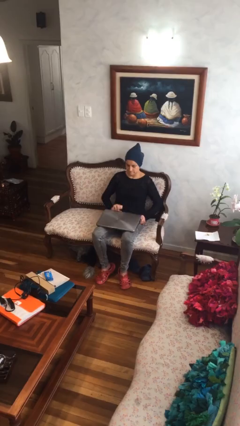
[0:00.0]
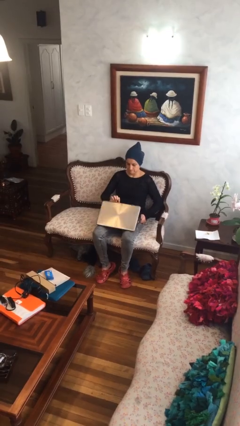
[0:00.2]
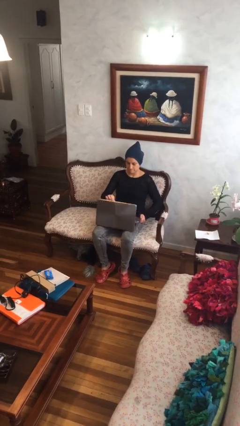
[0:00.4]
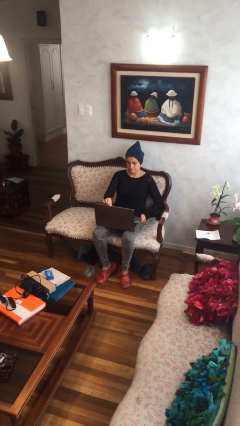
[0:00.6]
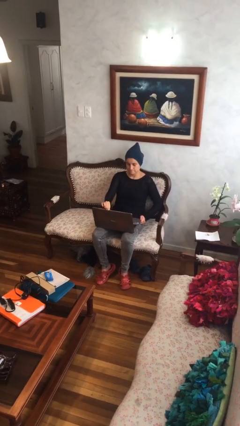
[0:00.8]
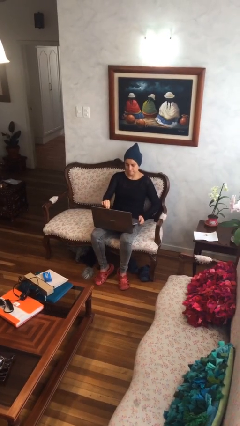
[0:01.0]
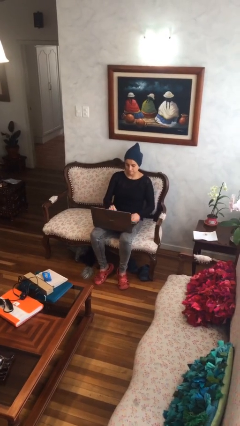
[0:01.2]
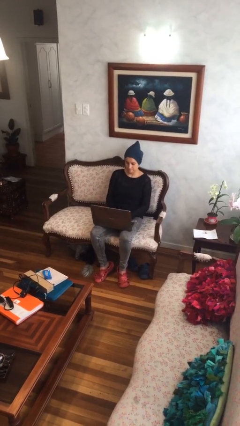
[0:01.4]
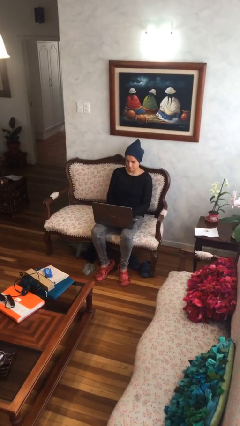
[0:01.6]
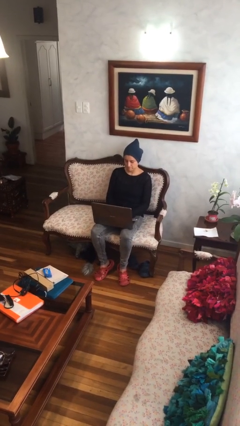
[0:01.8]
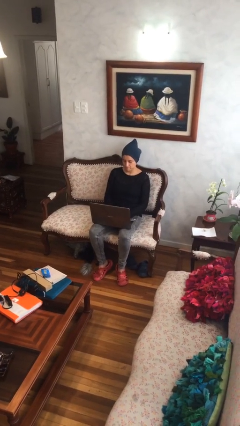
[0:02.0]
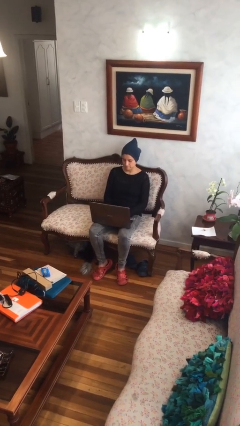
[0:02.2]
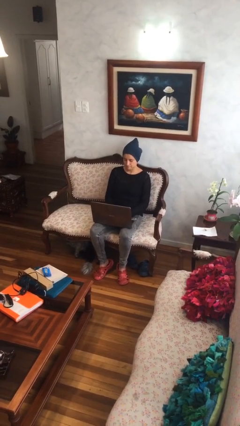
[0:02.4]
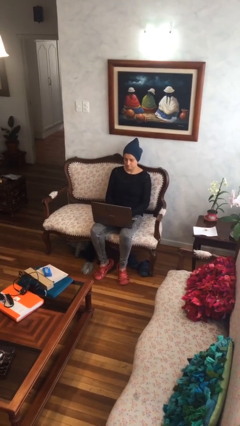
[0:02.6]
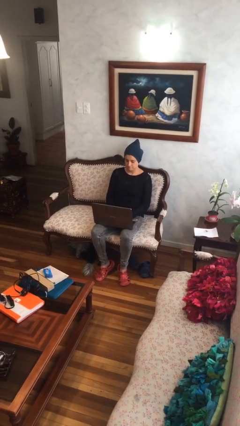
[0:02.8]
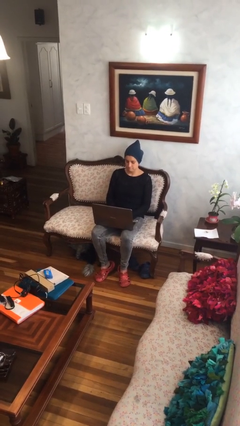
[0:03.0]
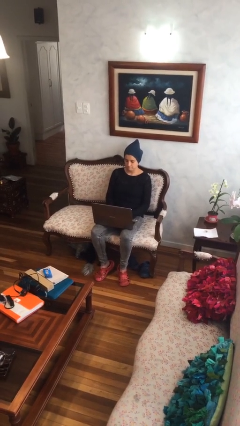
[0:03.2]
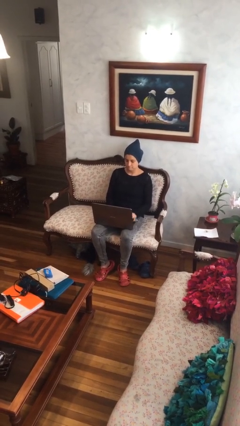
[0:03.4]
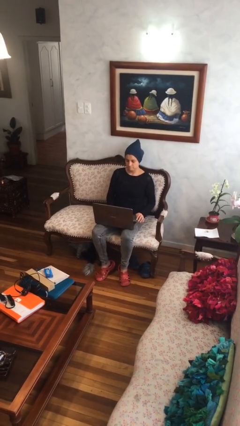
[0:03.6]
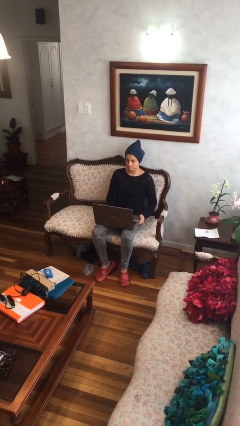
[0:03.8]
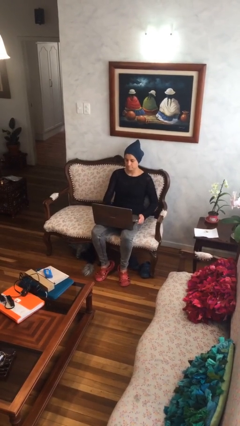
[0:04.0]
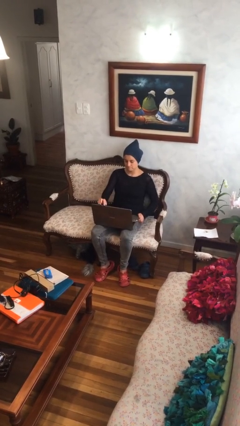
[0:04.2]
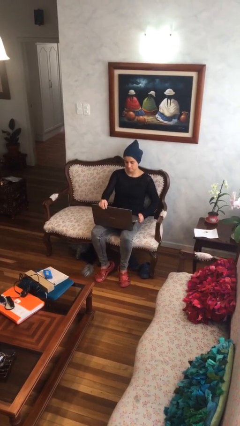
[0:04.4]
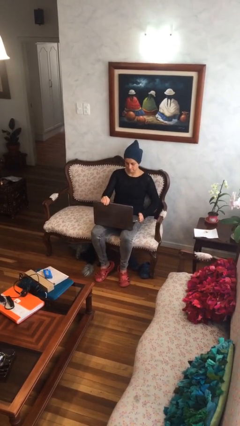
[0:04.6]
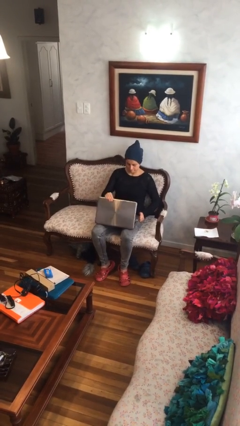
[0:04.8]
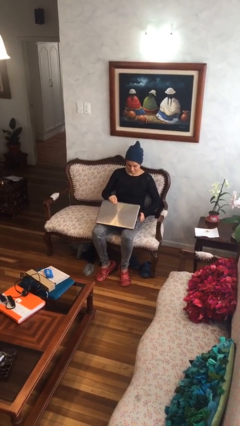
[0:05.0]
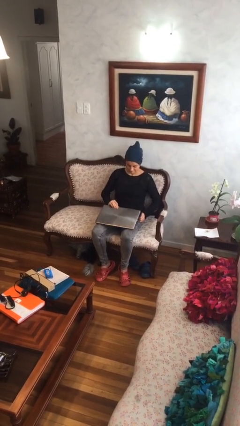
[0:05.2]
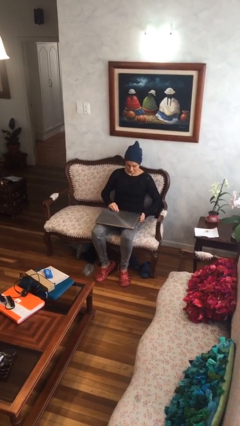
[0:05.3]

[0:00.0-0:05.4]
person interacts with laptop

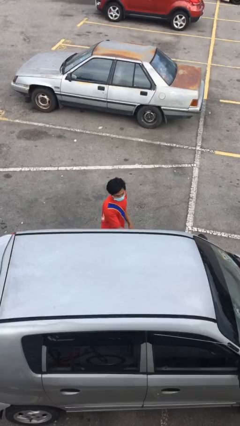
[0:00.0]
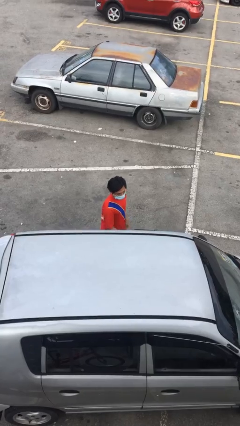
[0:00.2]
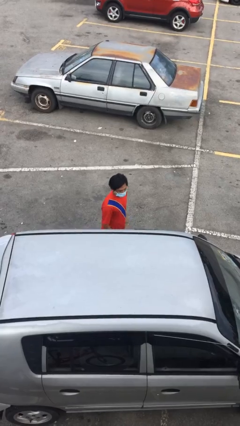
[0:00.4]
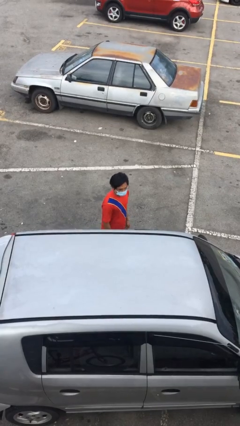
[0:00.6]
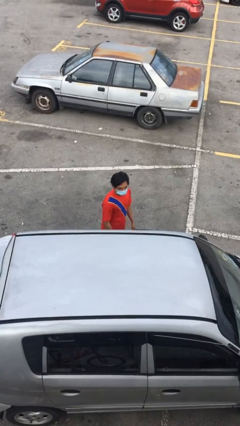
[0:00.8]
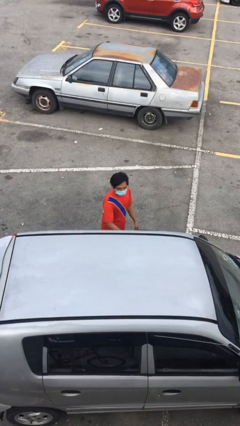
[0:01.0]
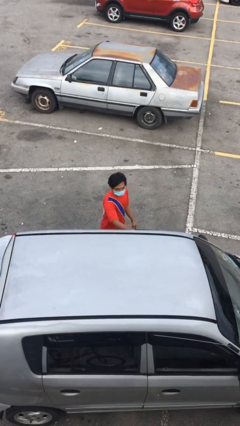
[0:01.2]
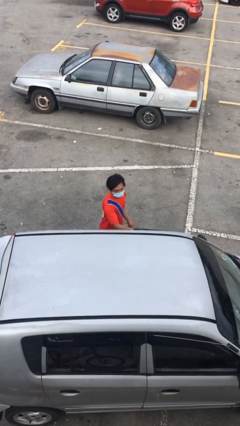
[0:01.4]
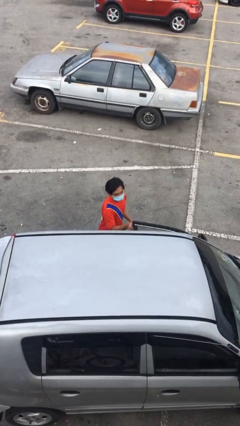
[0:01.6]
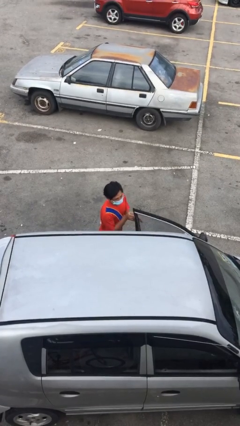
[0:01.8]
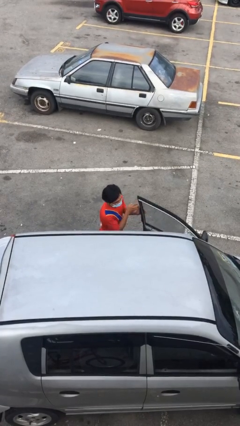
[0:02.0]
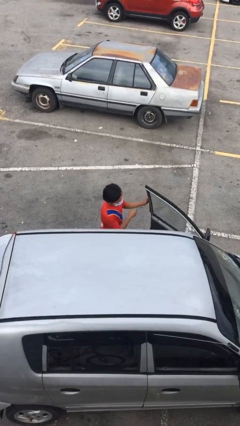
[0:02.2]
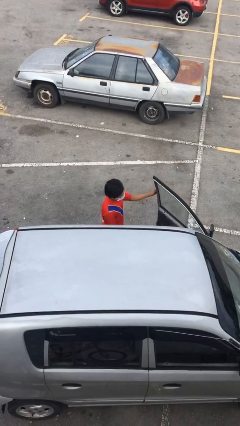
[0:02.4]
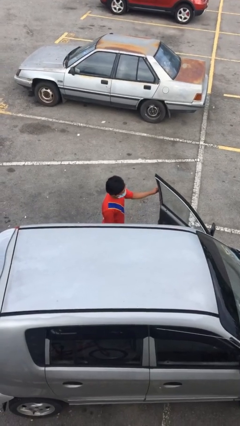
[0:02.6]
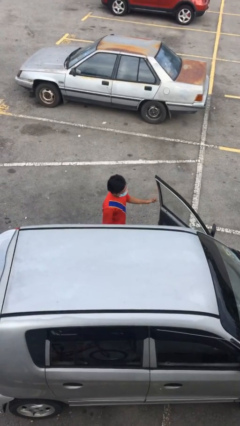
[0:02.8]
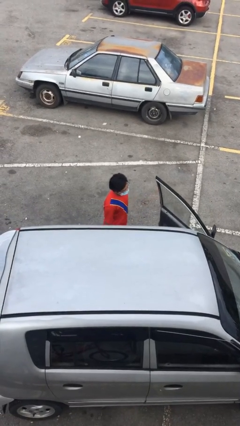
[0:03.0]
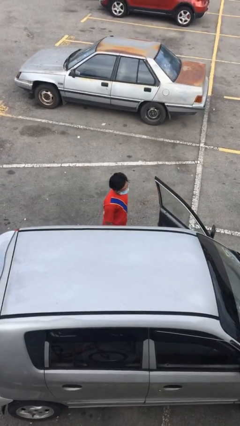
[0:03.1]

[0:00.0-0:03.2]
person opens car door

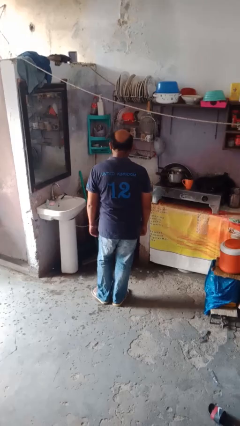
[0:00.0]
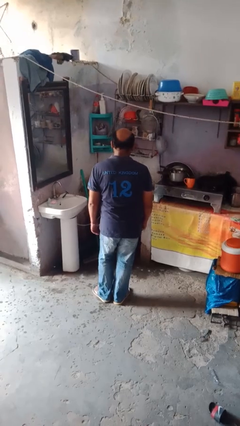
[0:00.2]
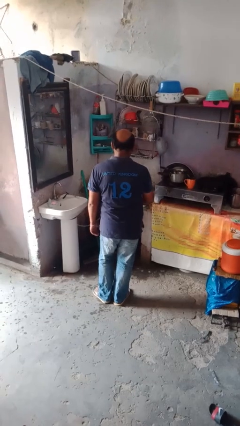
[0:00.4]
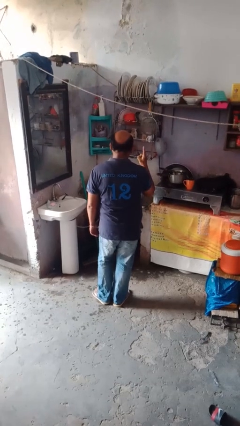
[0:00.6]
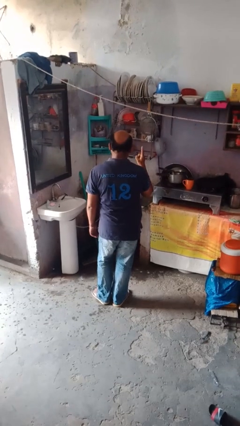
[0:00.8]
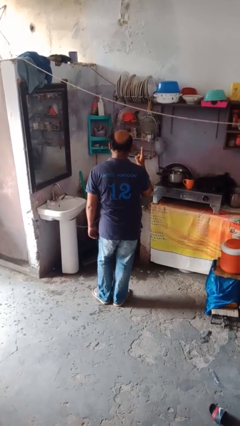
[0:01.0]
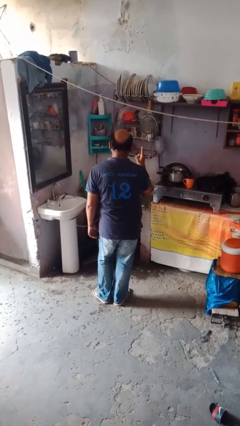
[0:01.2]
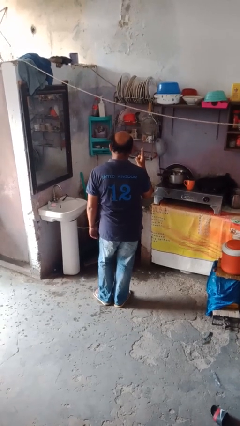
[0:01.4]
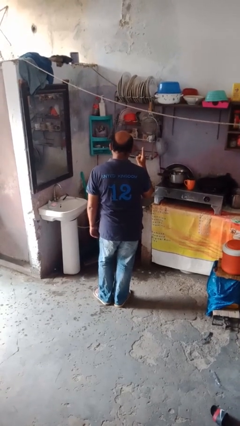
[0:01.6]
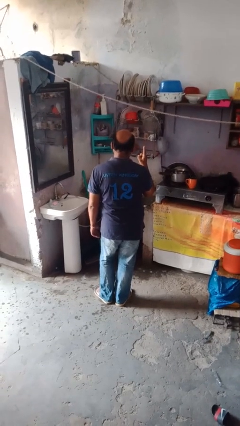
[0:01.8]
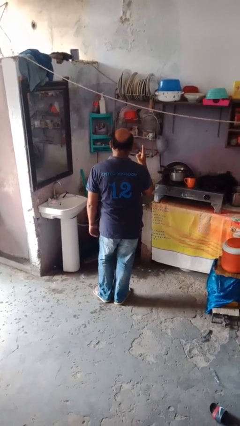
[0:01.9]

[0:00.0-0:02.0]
person gestures number one

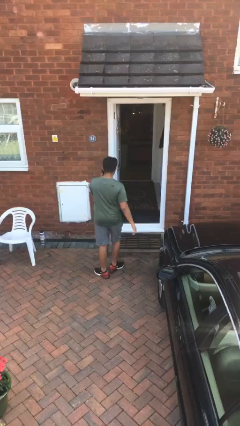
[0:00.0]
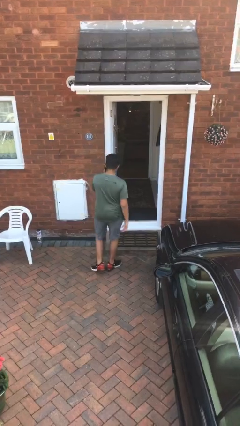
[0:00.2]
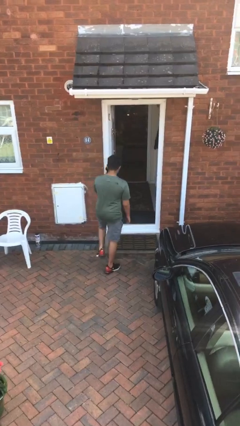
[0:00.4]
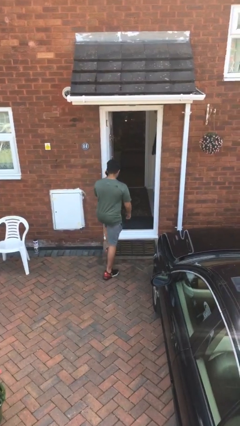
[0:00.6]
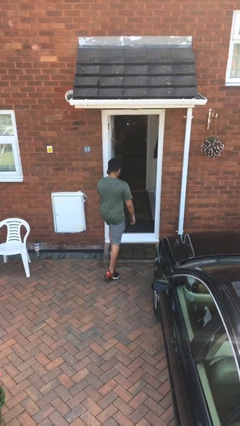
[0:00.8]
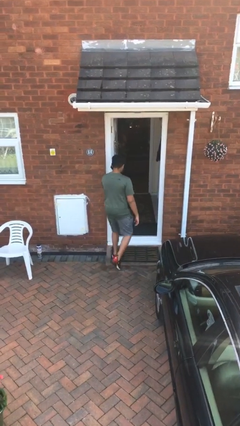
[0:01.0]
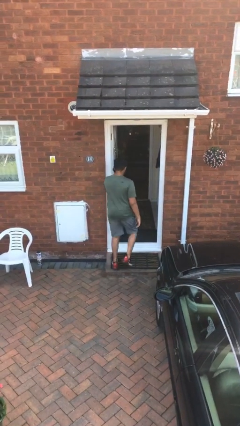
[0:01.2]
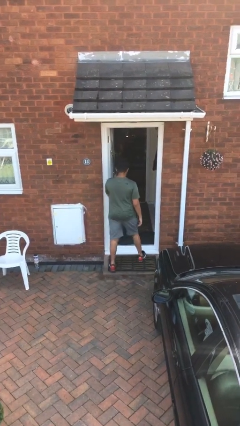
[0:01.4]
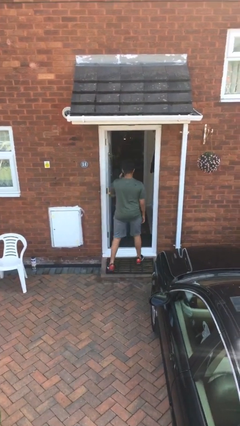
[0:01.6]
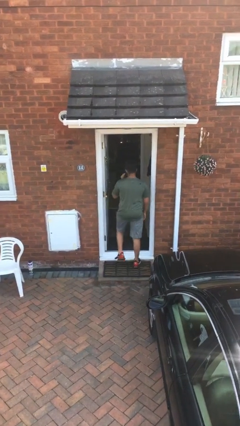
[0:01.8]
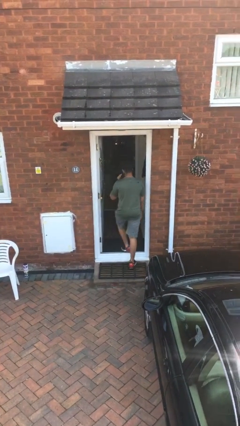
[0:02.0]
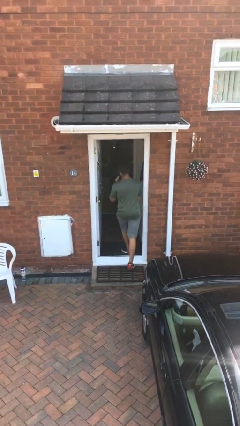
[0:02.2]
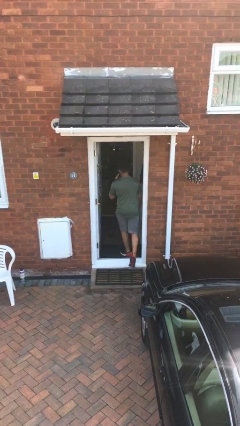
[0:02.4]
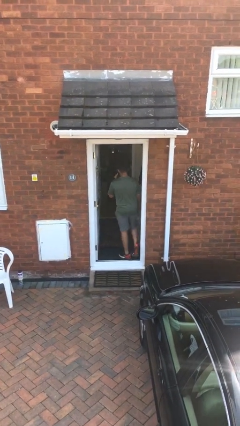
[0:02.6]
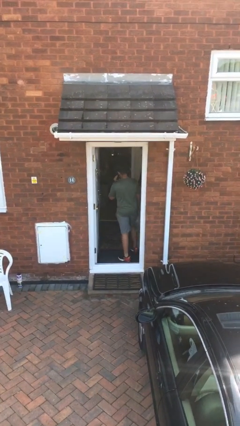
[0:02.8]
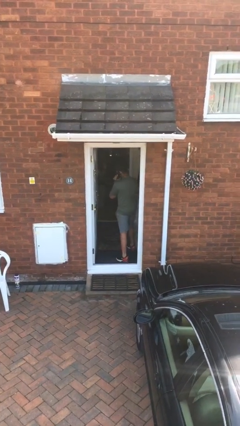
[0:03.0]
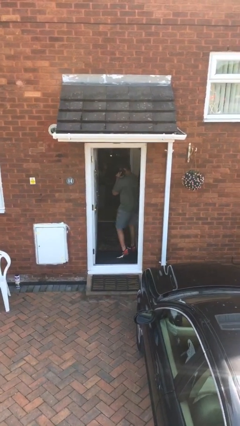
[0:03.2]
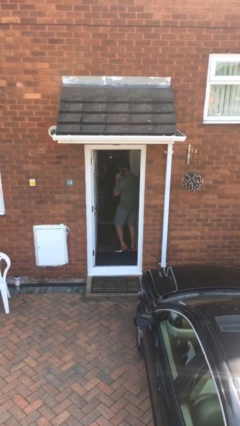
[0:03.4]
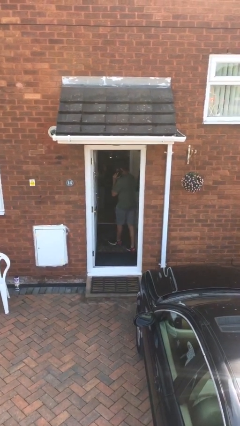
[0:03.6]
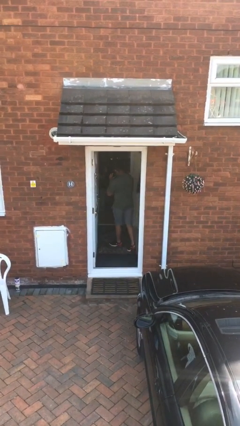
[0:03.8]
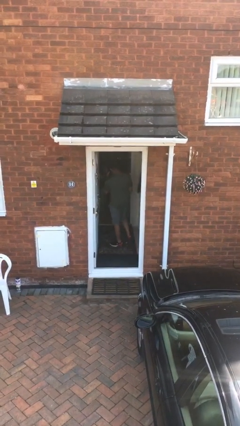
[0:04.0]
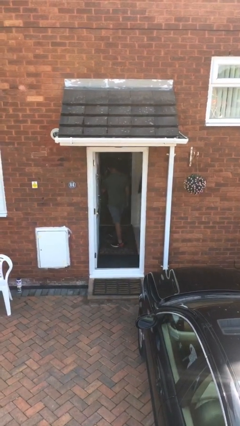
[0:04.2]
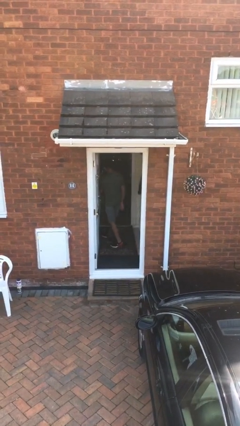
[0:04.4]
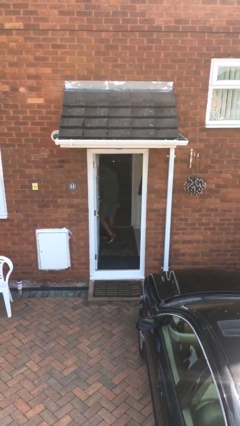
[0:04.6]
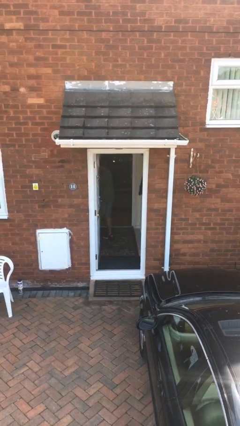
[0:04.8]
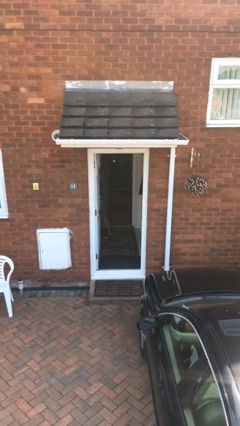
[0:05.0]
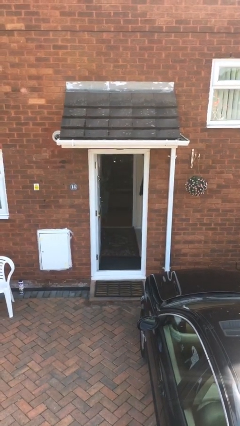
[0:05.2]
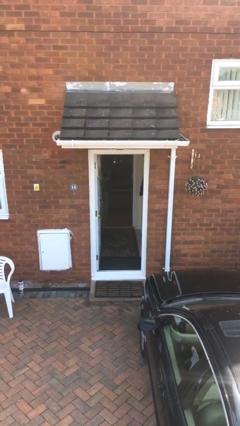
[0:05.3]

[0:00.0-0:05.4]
person exits scene through structure

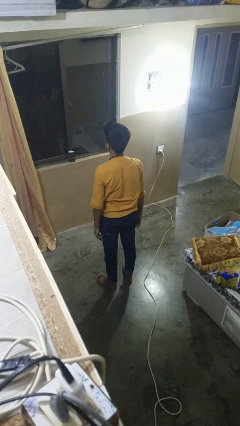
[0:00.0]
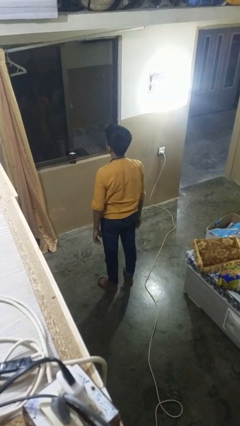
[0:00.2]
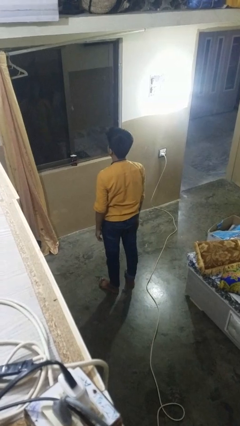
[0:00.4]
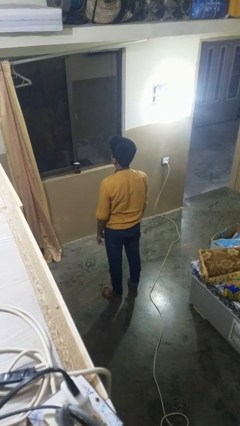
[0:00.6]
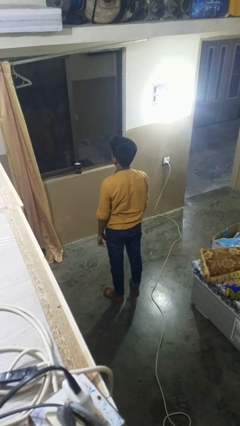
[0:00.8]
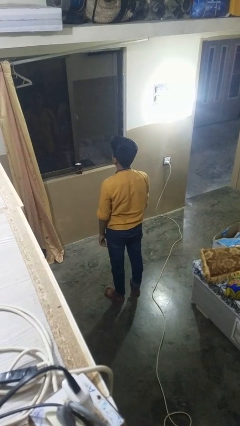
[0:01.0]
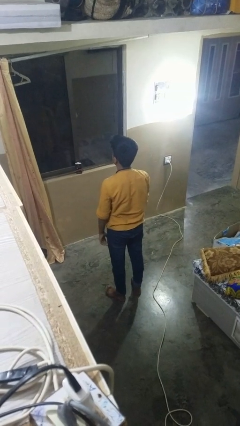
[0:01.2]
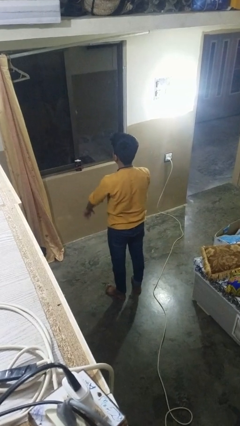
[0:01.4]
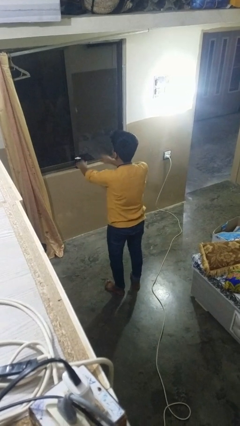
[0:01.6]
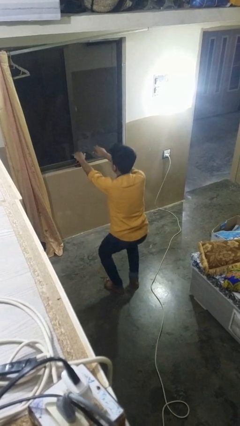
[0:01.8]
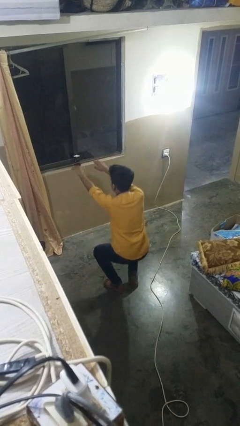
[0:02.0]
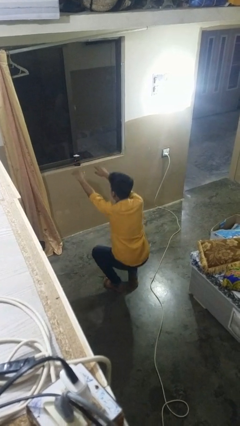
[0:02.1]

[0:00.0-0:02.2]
person squats
